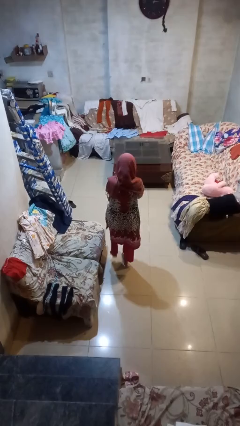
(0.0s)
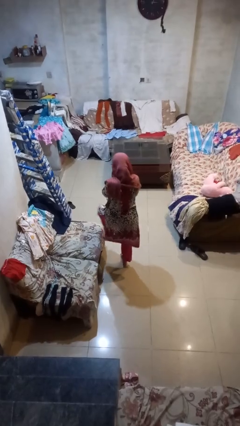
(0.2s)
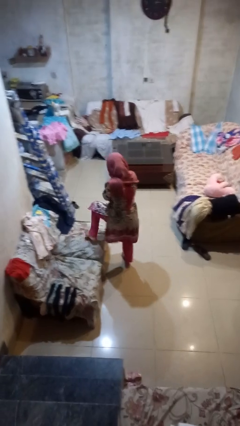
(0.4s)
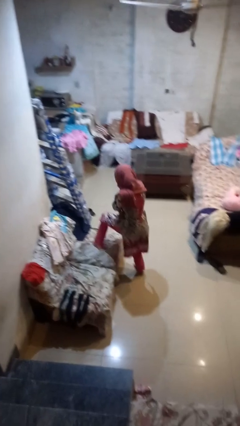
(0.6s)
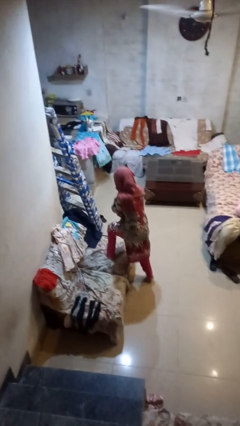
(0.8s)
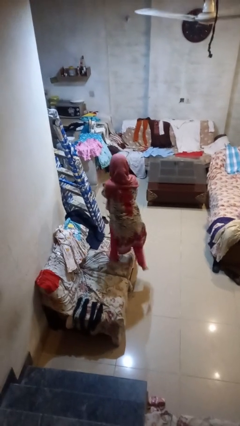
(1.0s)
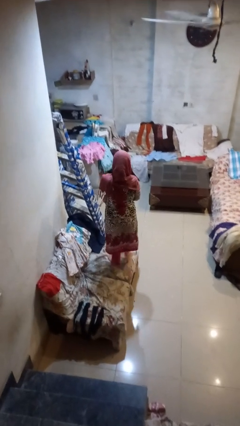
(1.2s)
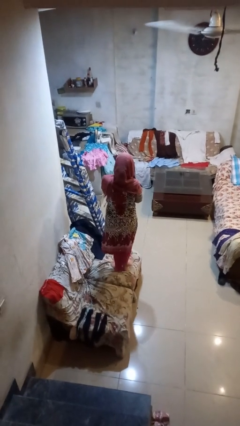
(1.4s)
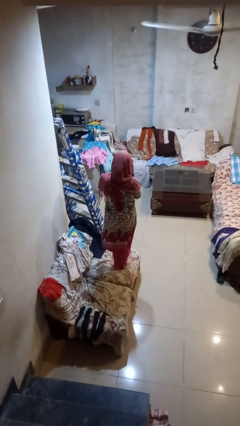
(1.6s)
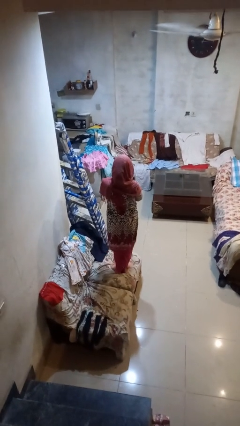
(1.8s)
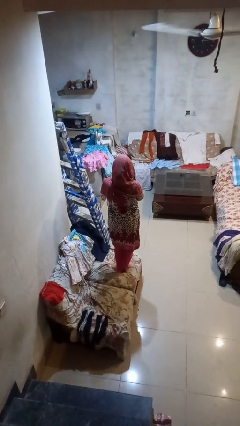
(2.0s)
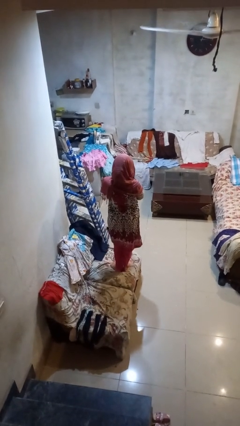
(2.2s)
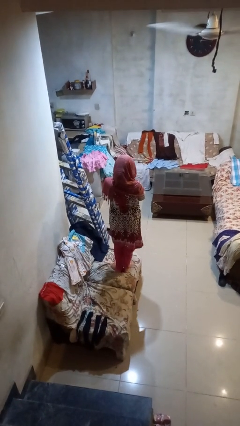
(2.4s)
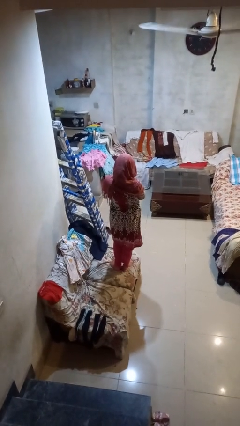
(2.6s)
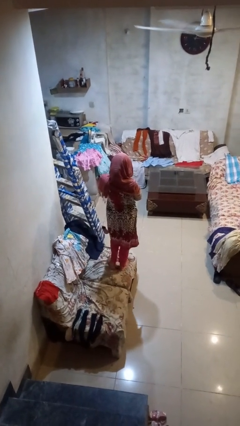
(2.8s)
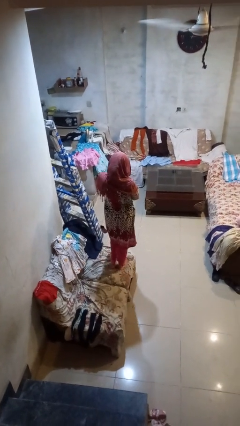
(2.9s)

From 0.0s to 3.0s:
person climbs on couch

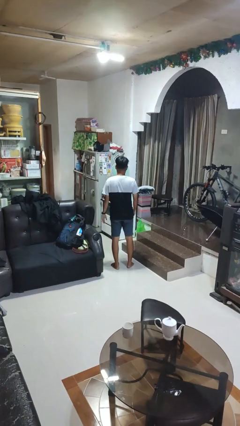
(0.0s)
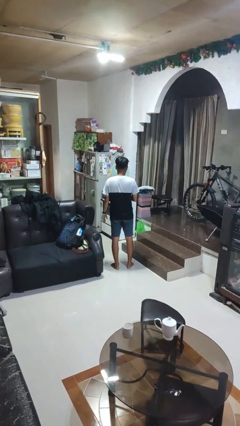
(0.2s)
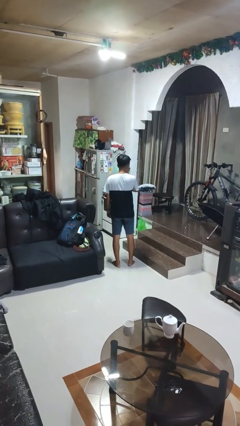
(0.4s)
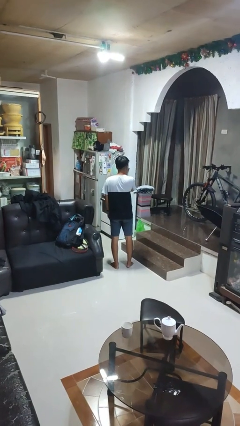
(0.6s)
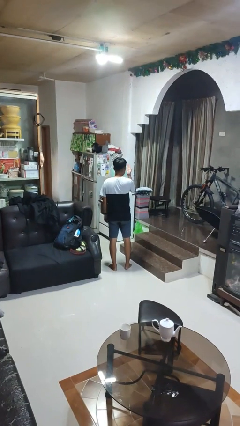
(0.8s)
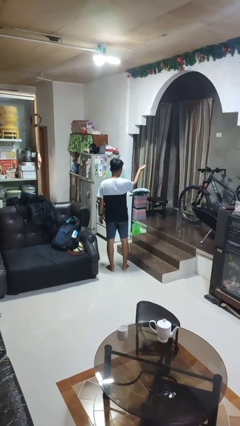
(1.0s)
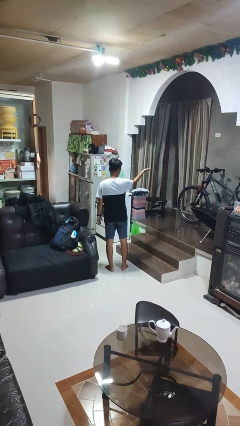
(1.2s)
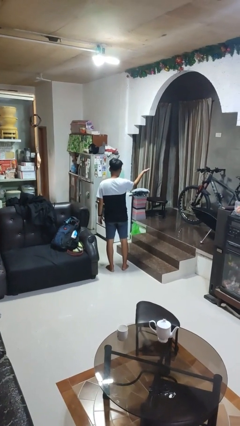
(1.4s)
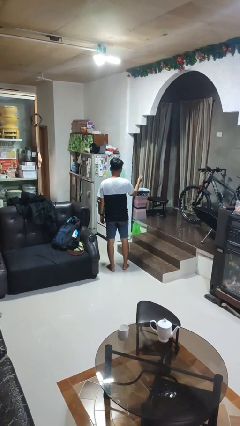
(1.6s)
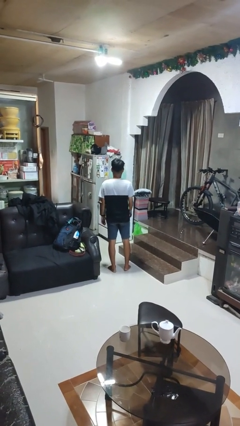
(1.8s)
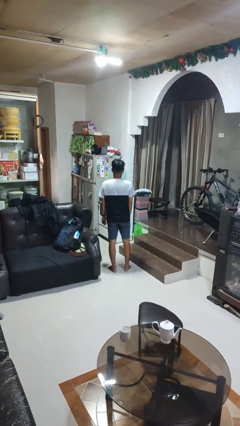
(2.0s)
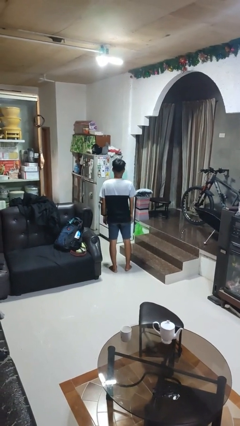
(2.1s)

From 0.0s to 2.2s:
person gestures blow kiss

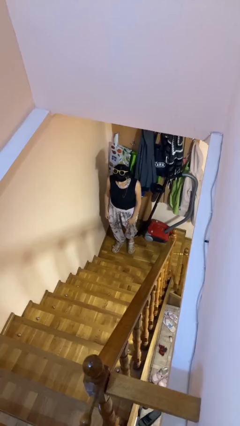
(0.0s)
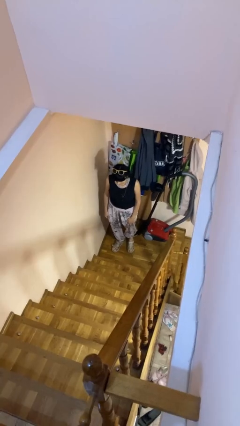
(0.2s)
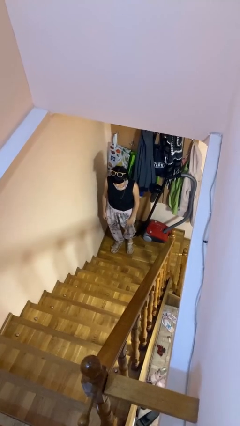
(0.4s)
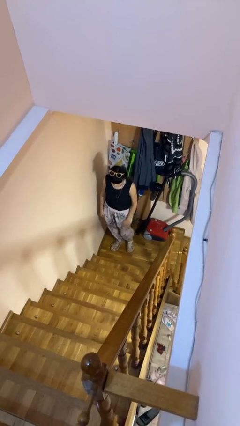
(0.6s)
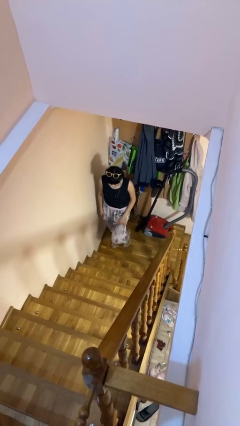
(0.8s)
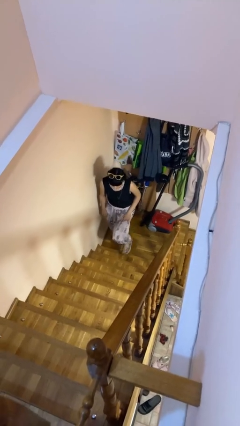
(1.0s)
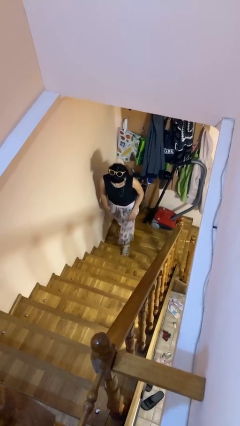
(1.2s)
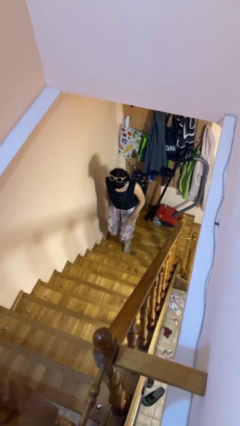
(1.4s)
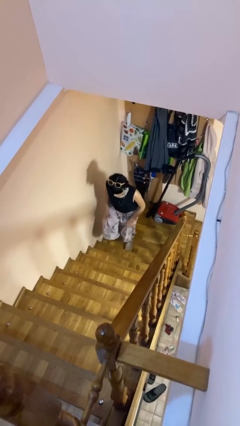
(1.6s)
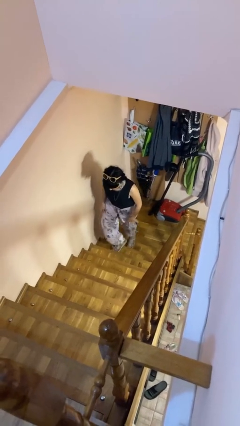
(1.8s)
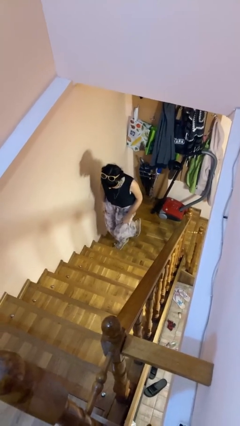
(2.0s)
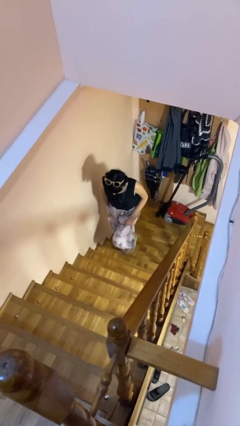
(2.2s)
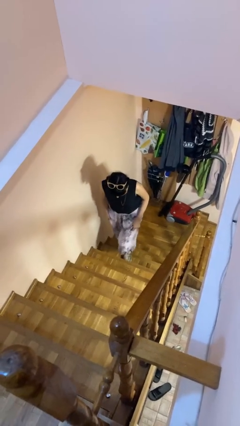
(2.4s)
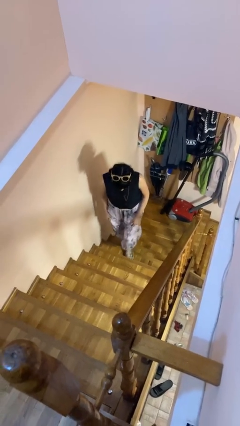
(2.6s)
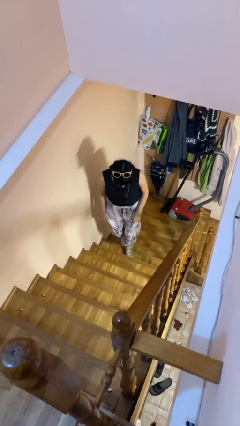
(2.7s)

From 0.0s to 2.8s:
person climbs up stairs

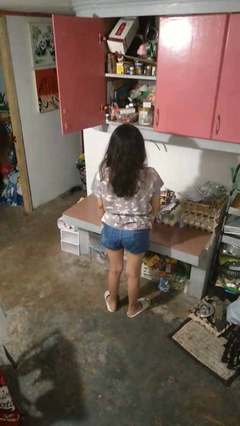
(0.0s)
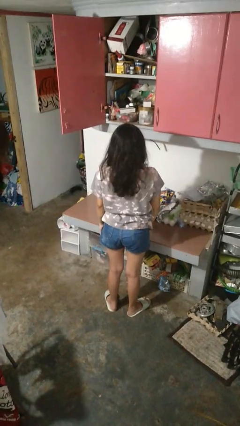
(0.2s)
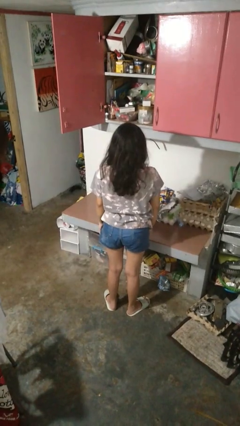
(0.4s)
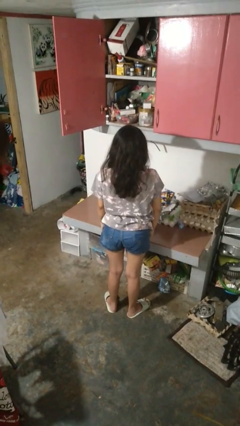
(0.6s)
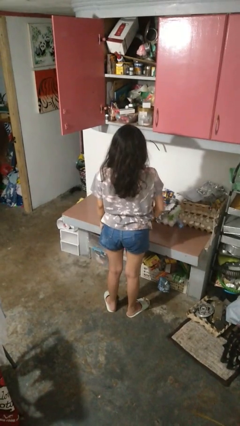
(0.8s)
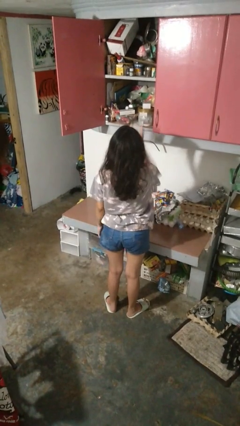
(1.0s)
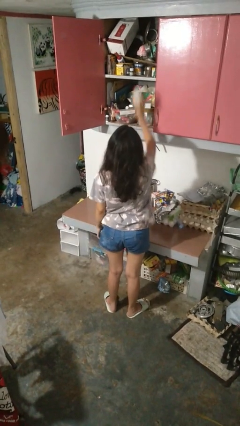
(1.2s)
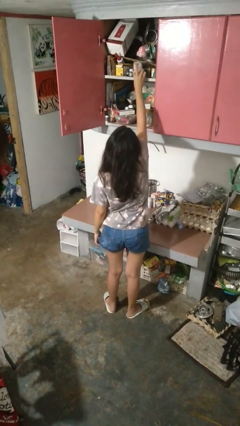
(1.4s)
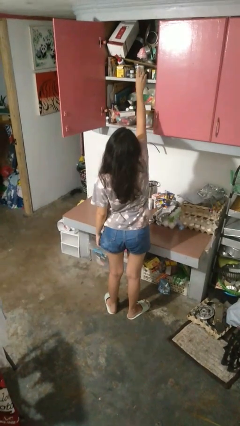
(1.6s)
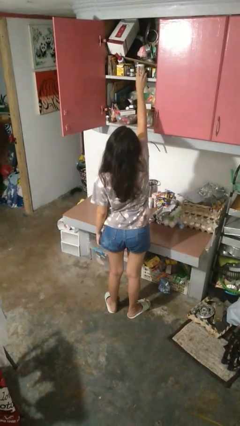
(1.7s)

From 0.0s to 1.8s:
person puts object in cabinet

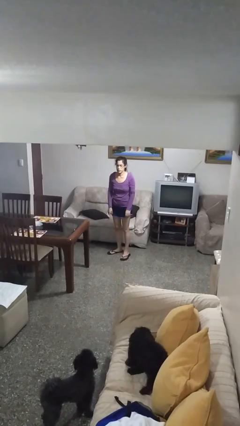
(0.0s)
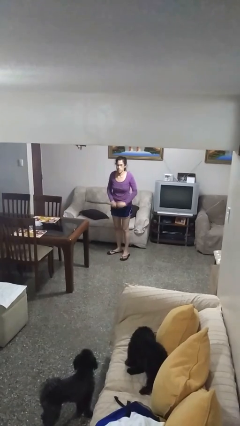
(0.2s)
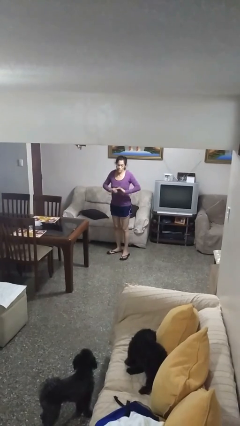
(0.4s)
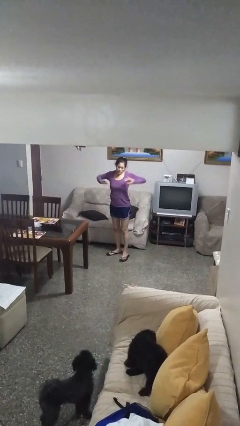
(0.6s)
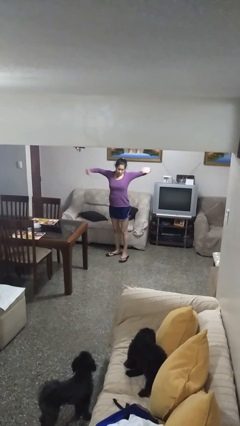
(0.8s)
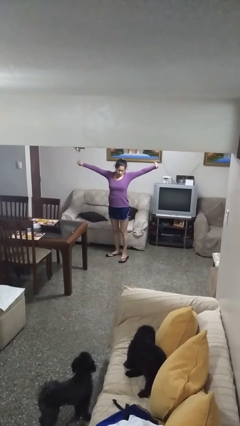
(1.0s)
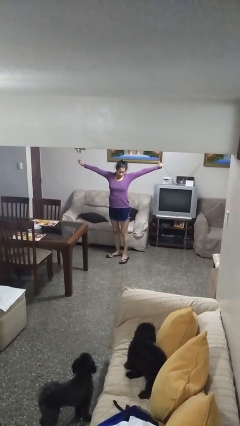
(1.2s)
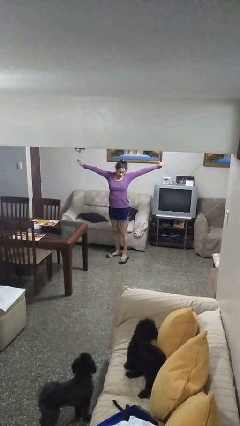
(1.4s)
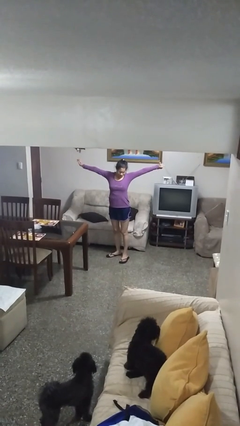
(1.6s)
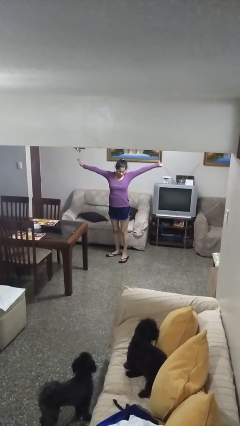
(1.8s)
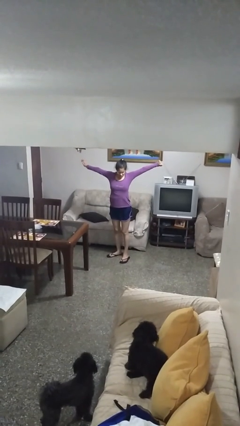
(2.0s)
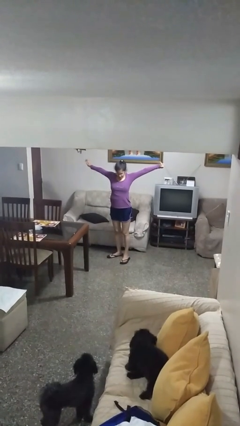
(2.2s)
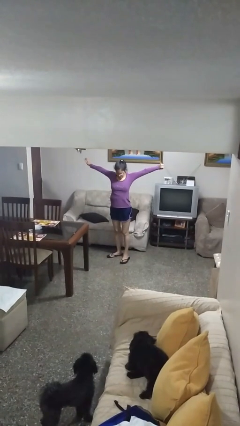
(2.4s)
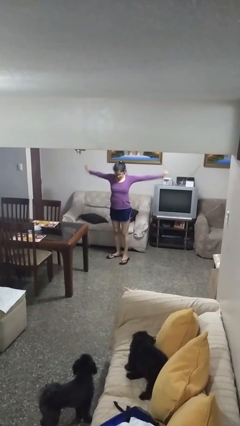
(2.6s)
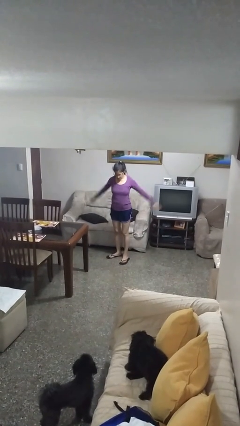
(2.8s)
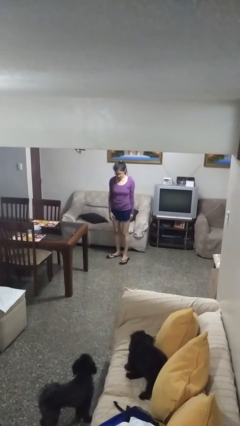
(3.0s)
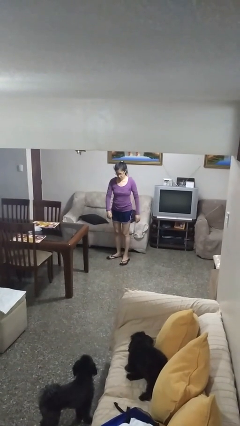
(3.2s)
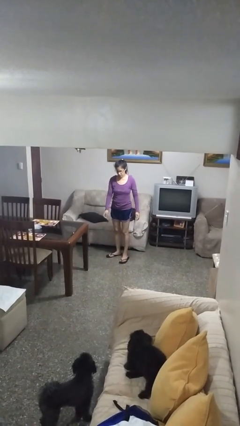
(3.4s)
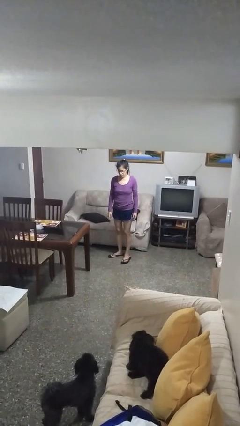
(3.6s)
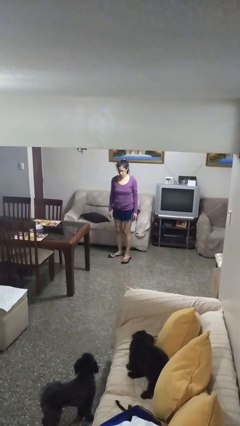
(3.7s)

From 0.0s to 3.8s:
person stretches arms to side

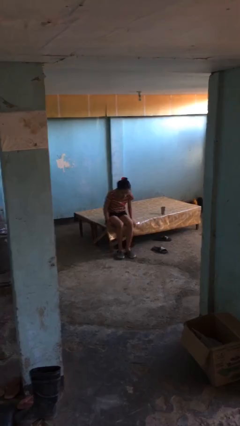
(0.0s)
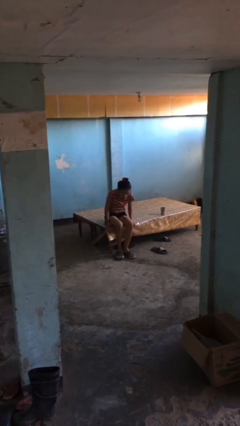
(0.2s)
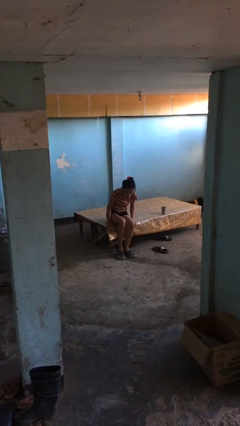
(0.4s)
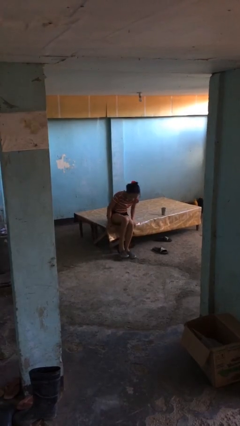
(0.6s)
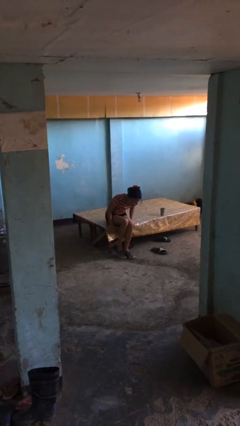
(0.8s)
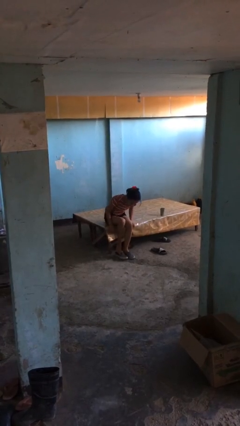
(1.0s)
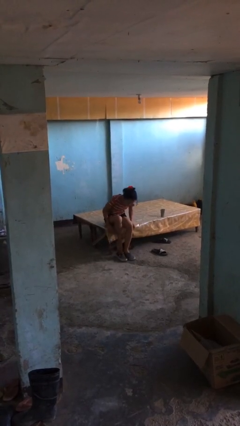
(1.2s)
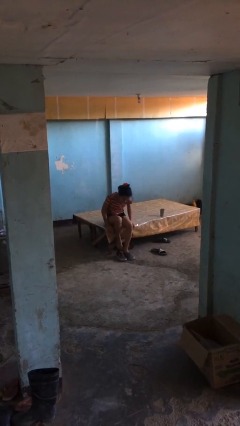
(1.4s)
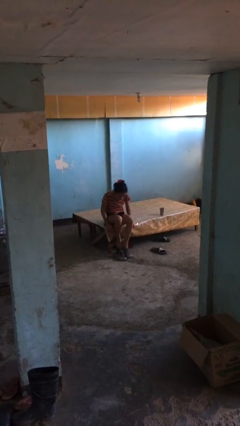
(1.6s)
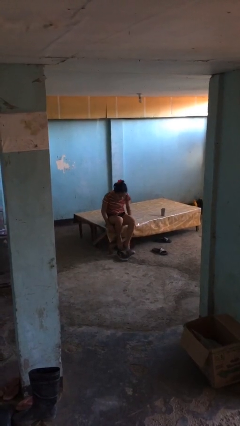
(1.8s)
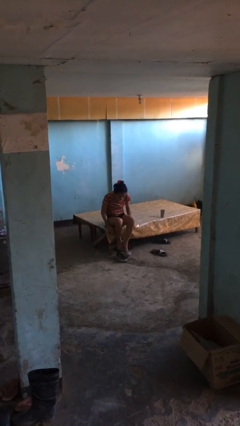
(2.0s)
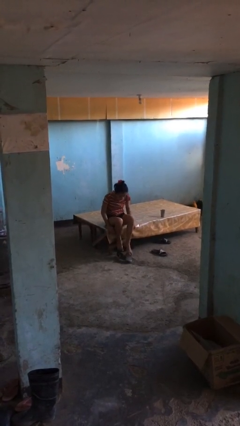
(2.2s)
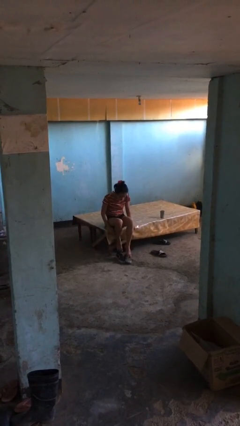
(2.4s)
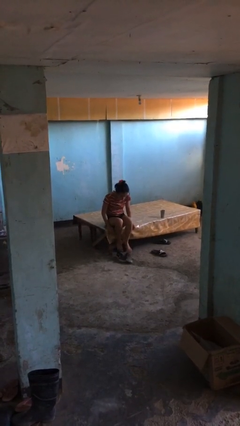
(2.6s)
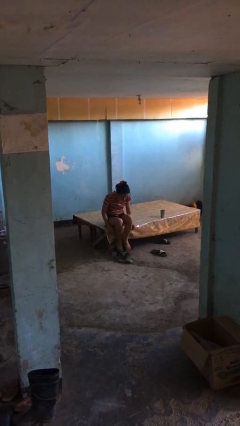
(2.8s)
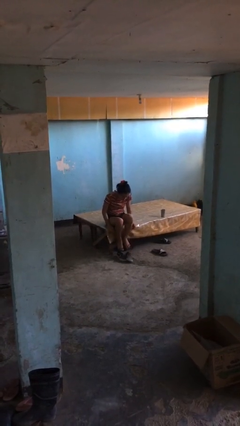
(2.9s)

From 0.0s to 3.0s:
person takes off shoes

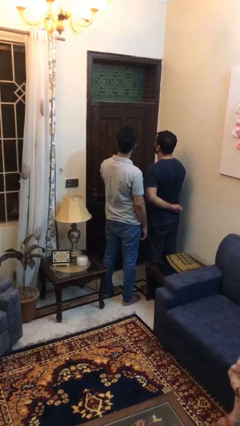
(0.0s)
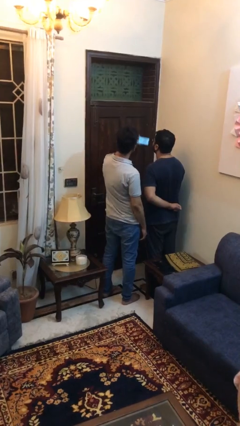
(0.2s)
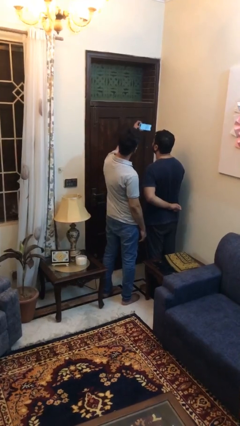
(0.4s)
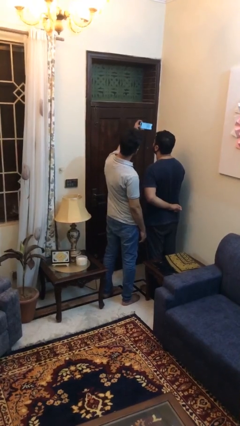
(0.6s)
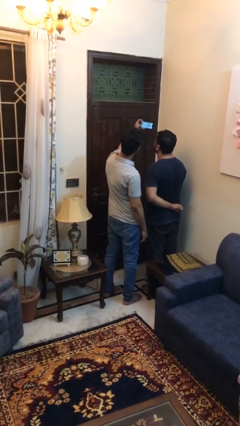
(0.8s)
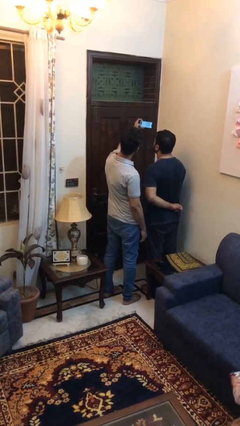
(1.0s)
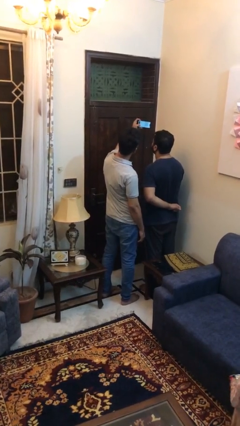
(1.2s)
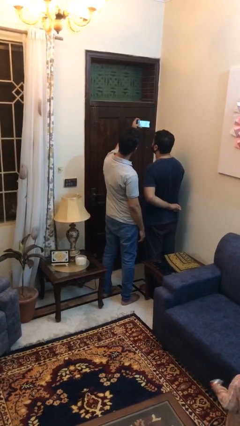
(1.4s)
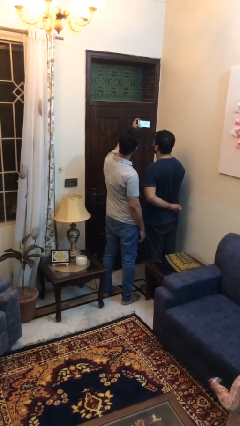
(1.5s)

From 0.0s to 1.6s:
person takes selfie with person
